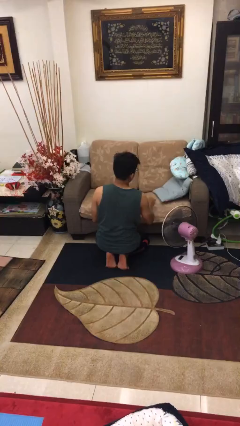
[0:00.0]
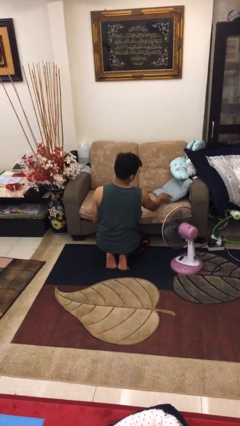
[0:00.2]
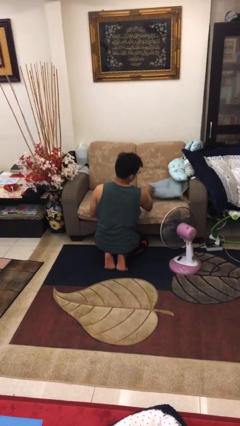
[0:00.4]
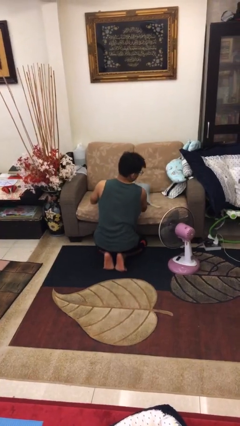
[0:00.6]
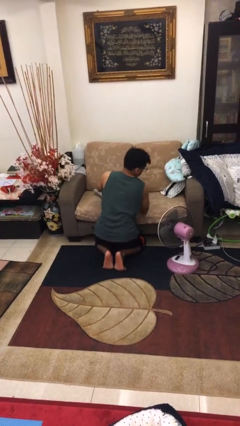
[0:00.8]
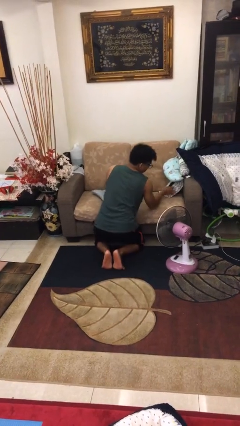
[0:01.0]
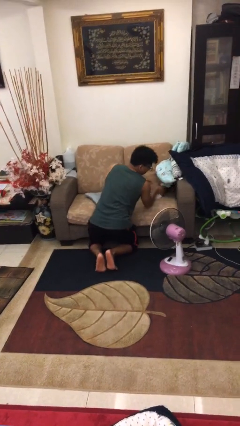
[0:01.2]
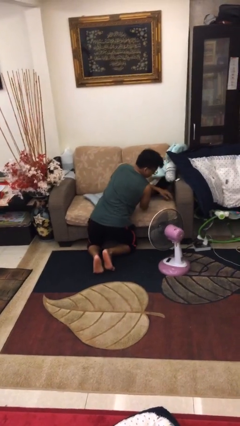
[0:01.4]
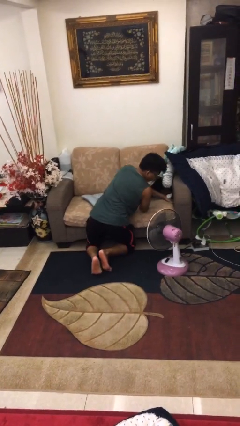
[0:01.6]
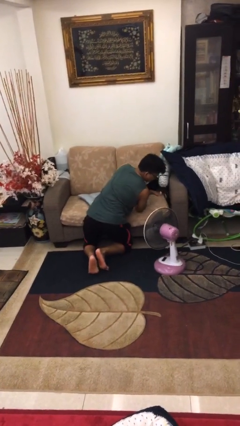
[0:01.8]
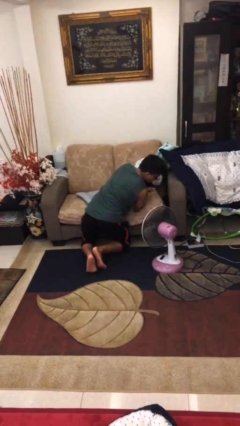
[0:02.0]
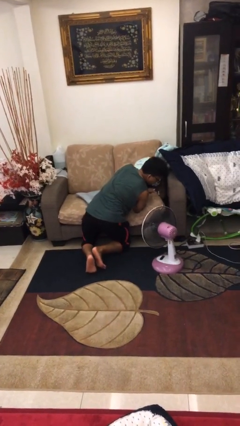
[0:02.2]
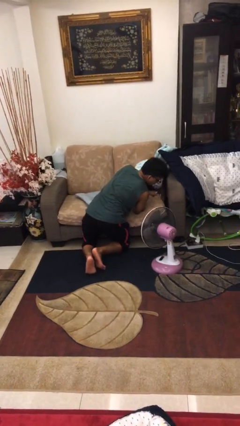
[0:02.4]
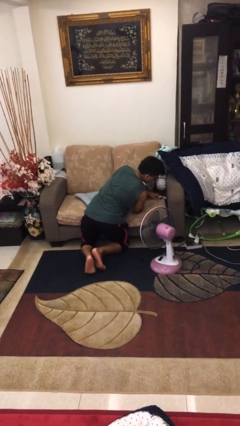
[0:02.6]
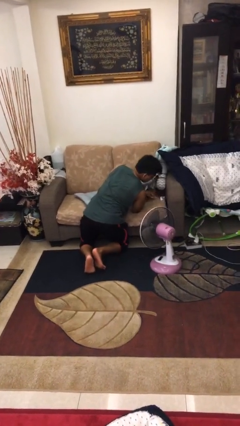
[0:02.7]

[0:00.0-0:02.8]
person searches in couch

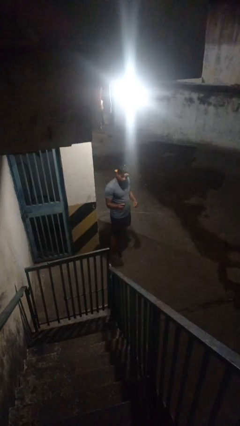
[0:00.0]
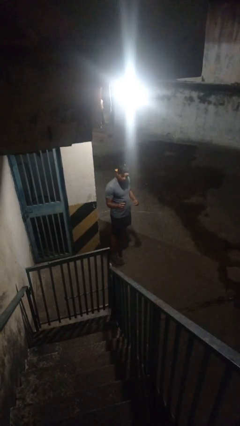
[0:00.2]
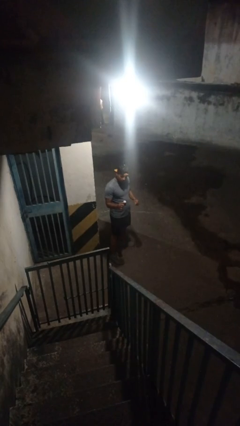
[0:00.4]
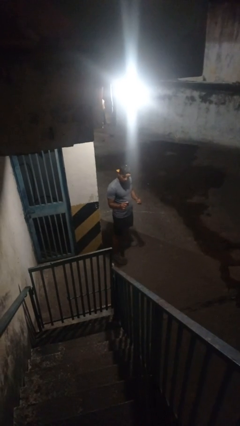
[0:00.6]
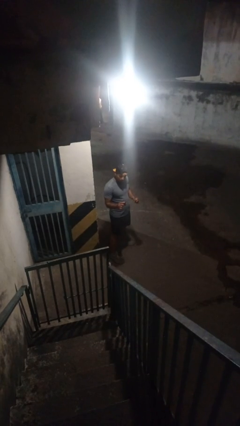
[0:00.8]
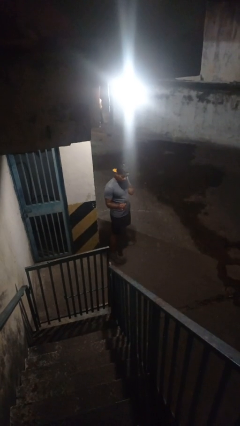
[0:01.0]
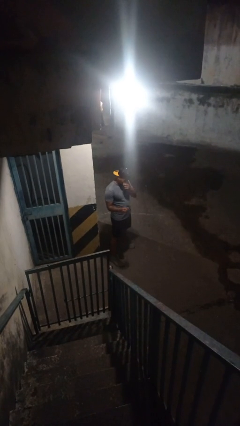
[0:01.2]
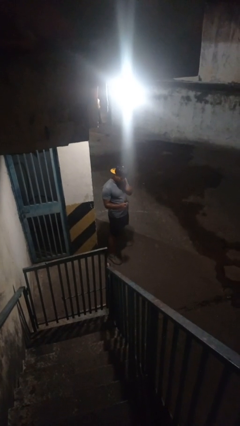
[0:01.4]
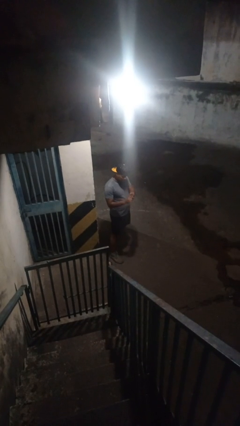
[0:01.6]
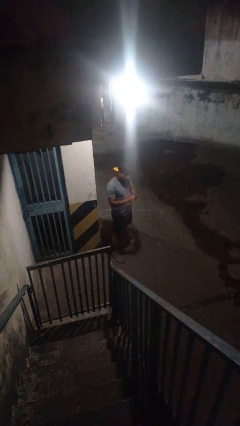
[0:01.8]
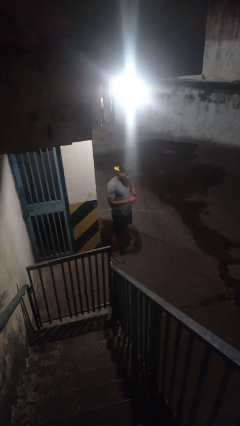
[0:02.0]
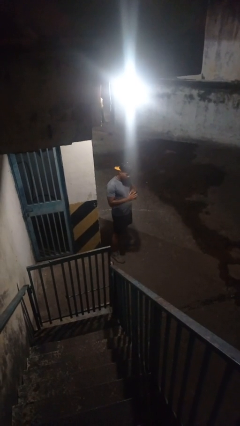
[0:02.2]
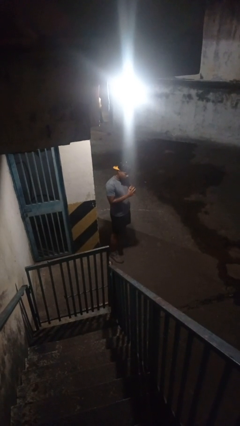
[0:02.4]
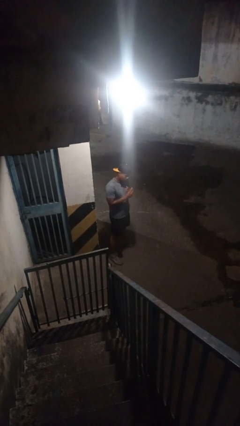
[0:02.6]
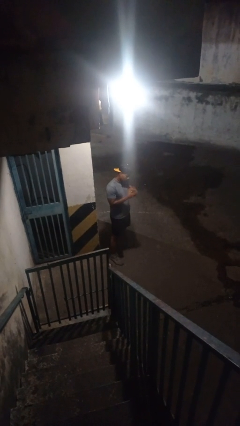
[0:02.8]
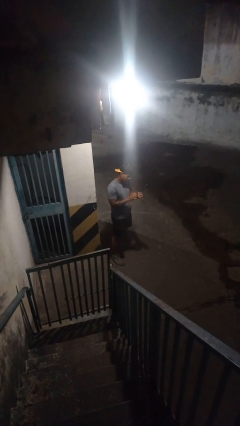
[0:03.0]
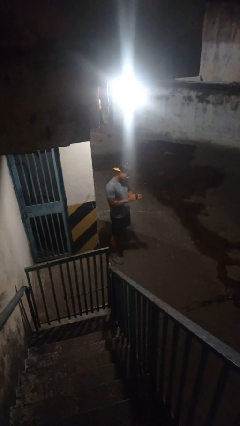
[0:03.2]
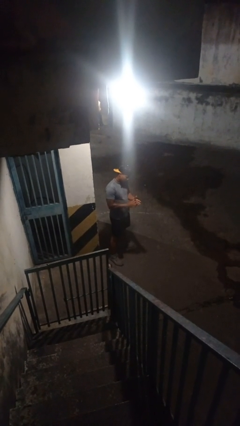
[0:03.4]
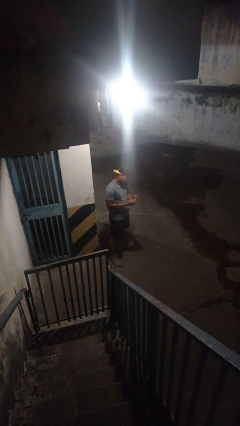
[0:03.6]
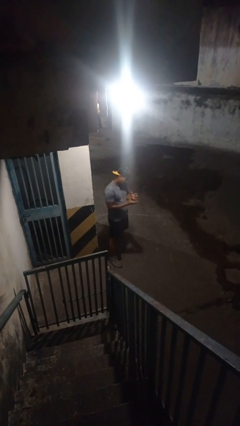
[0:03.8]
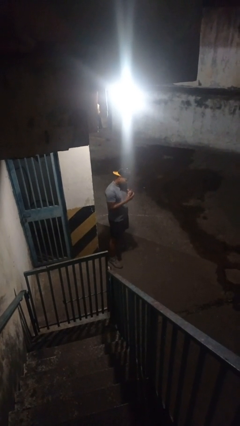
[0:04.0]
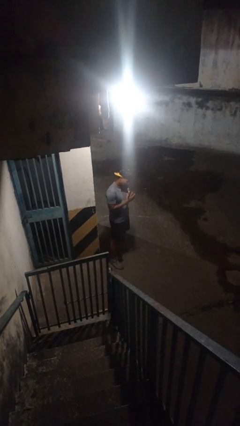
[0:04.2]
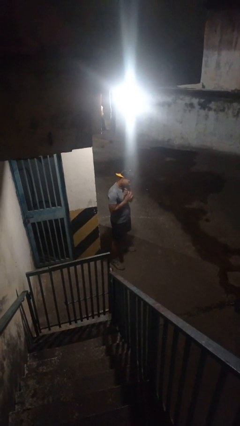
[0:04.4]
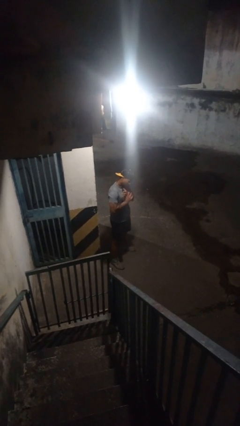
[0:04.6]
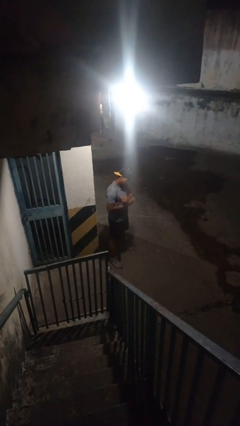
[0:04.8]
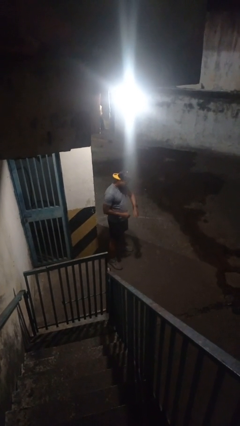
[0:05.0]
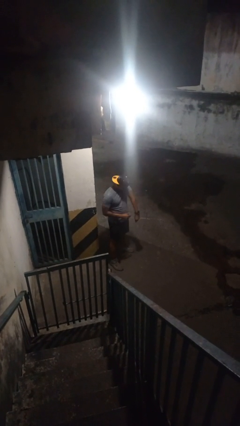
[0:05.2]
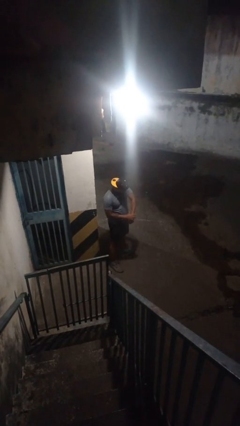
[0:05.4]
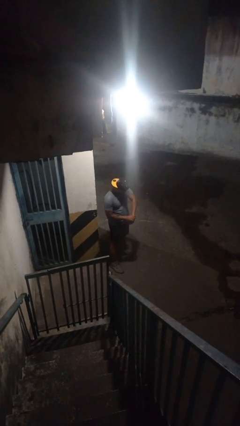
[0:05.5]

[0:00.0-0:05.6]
person puts on wristwatch

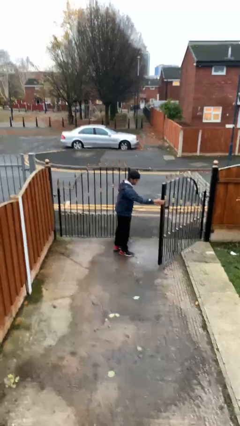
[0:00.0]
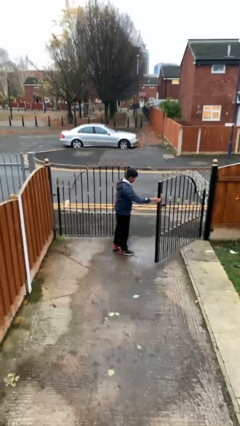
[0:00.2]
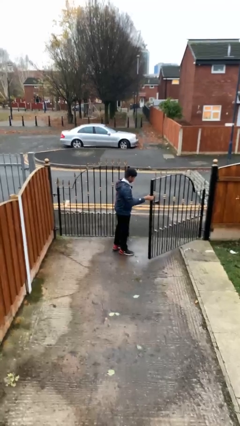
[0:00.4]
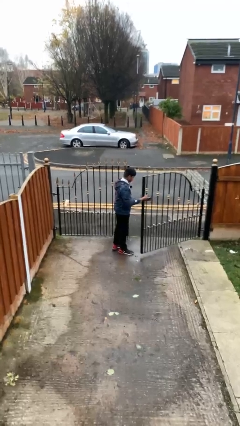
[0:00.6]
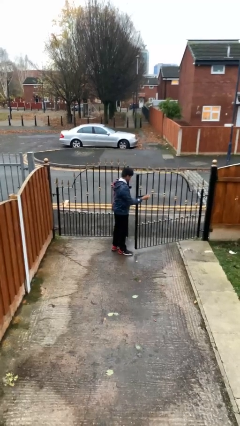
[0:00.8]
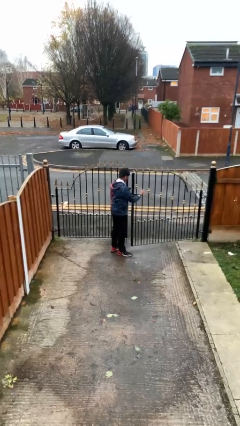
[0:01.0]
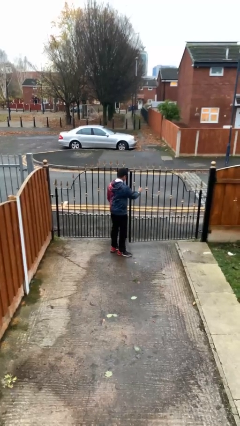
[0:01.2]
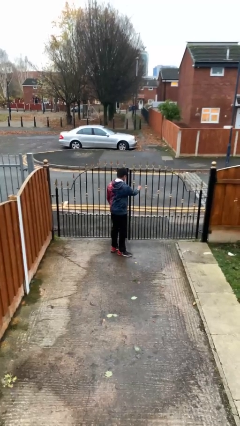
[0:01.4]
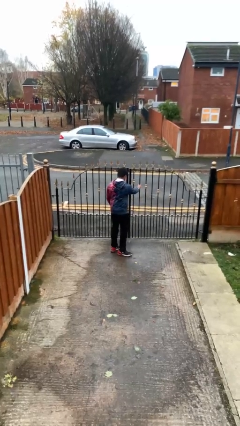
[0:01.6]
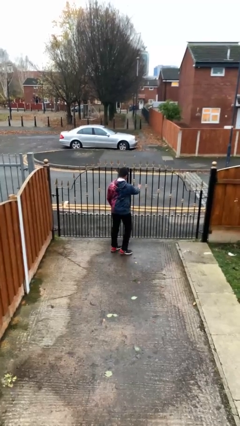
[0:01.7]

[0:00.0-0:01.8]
person closes facility door

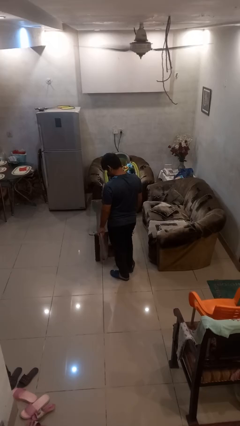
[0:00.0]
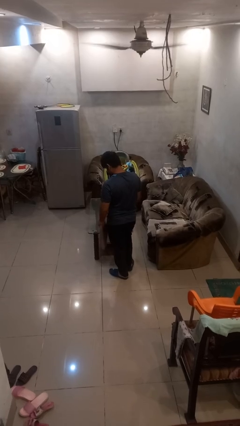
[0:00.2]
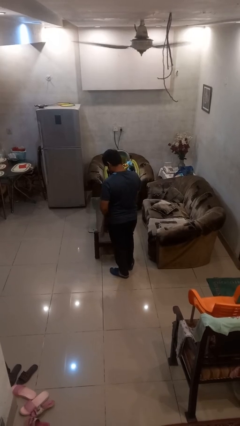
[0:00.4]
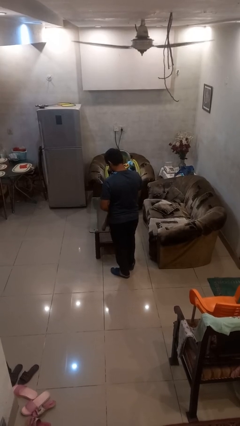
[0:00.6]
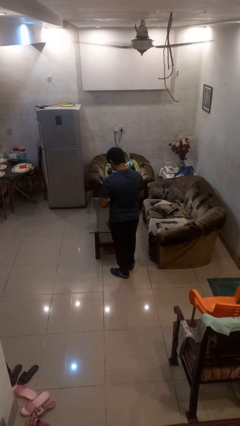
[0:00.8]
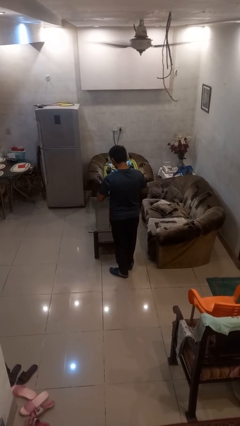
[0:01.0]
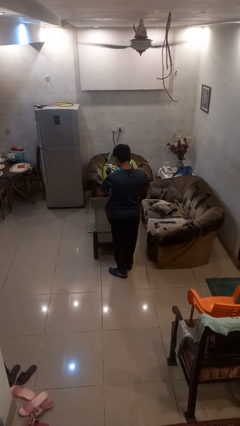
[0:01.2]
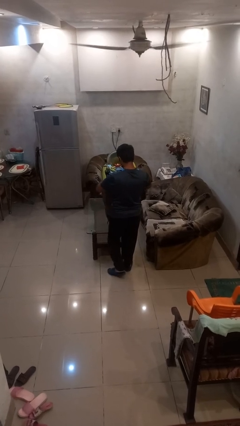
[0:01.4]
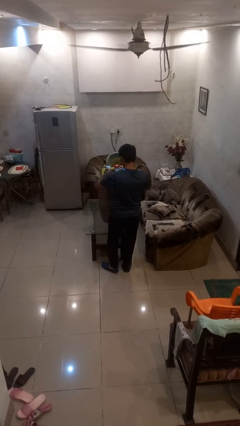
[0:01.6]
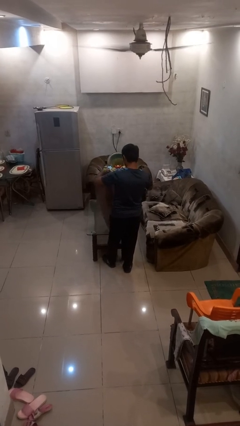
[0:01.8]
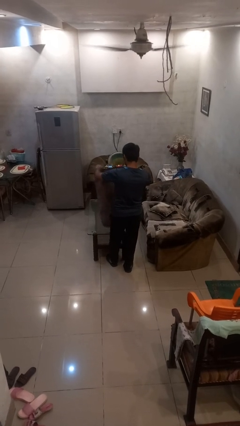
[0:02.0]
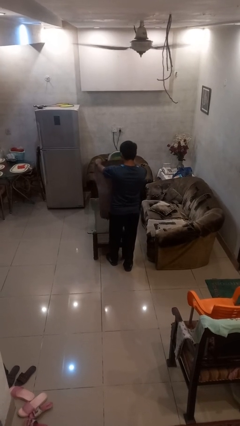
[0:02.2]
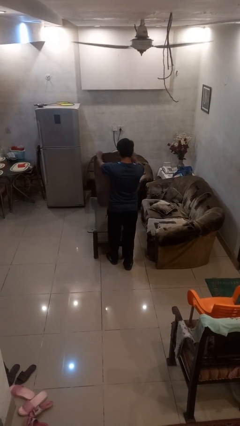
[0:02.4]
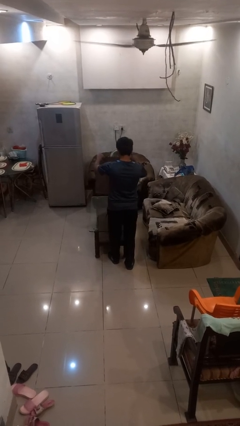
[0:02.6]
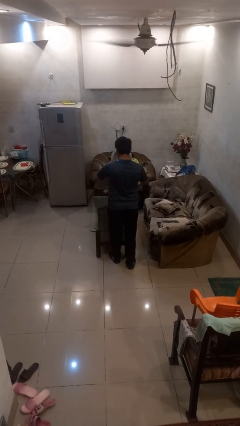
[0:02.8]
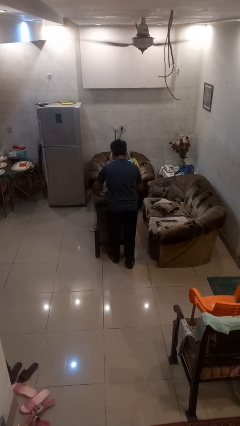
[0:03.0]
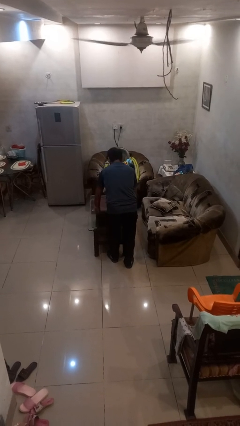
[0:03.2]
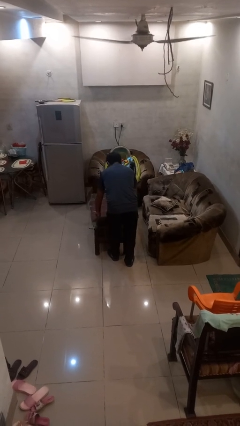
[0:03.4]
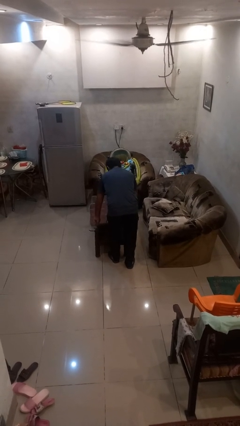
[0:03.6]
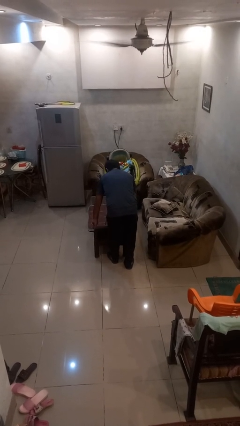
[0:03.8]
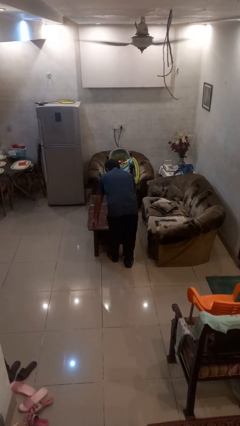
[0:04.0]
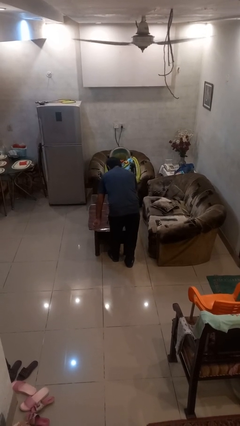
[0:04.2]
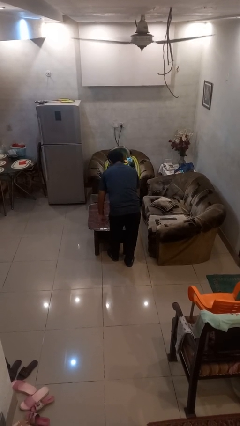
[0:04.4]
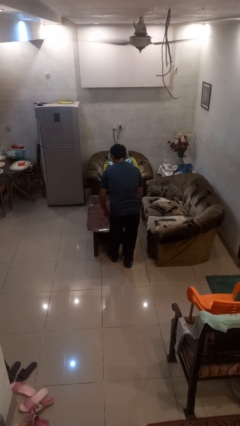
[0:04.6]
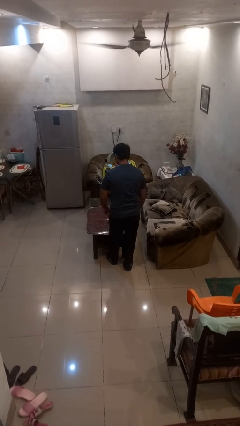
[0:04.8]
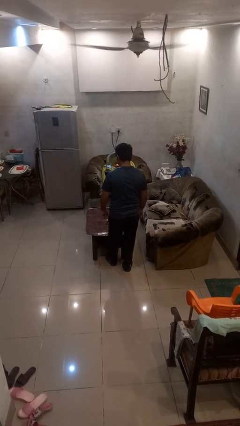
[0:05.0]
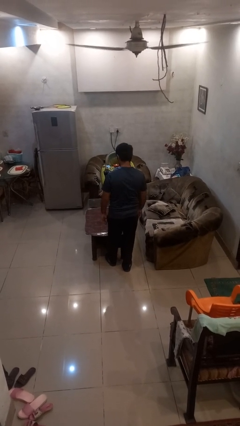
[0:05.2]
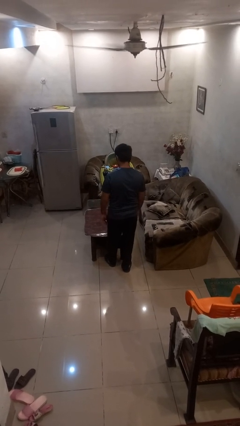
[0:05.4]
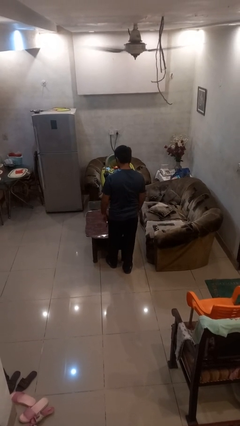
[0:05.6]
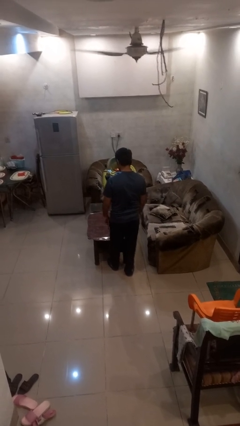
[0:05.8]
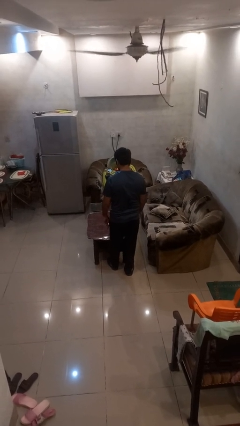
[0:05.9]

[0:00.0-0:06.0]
person spreads tablecloth

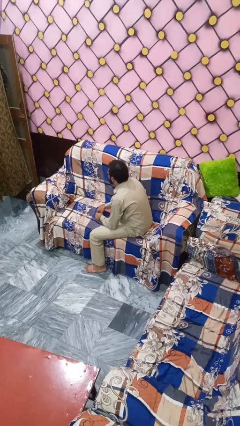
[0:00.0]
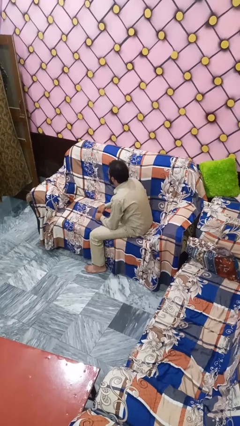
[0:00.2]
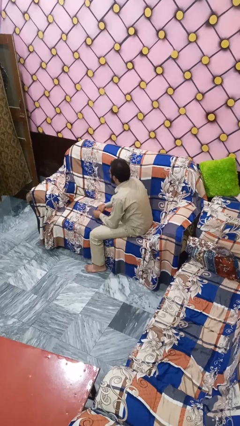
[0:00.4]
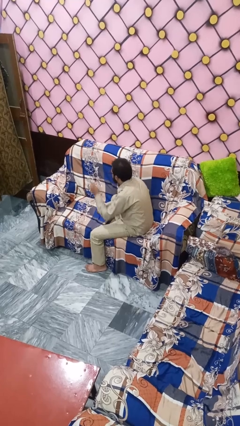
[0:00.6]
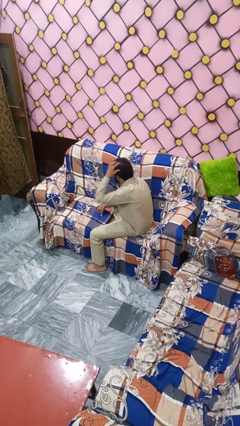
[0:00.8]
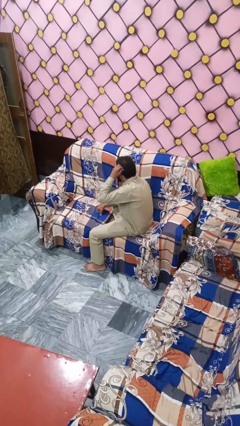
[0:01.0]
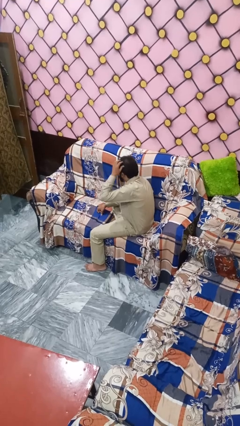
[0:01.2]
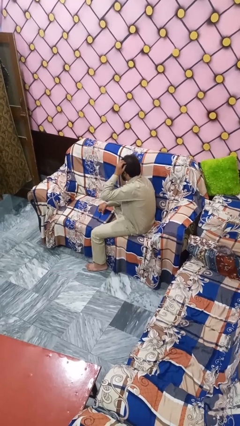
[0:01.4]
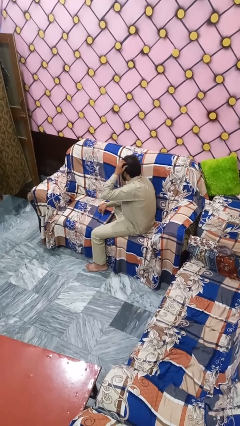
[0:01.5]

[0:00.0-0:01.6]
person strokes hair

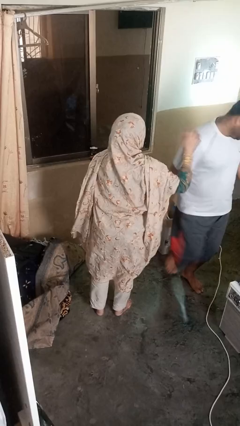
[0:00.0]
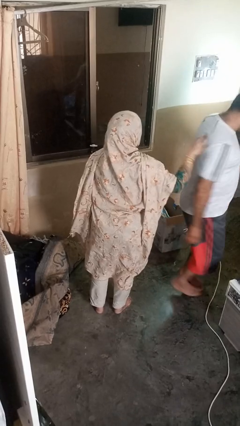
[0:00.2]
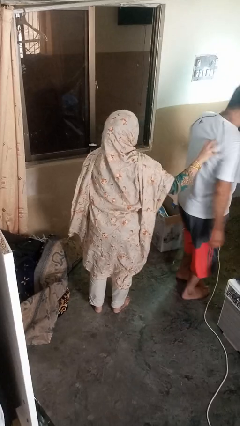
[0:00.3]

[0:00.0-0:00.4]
person spins person around
